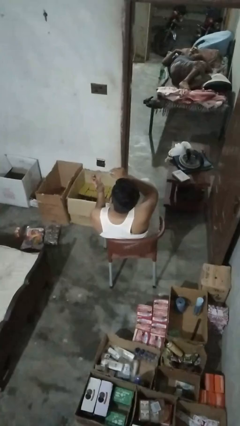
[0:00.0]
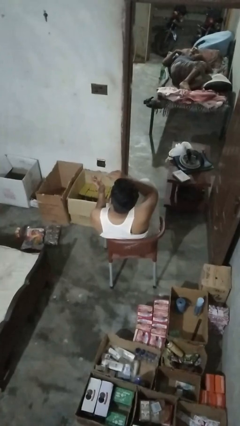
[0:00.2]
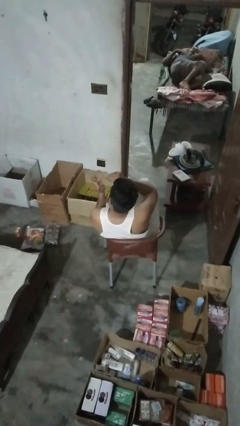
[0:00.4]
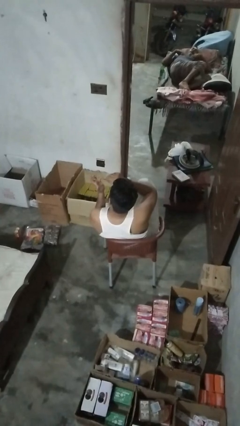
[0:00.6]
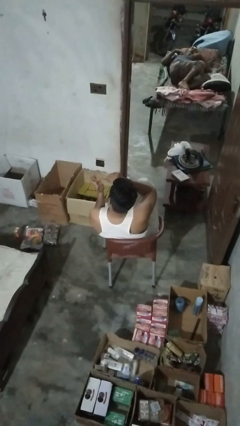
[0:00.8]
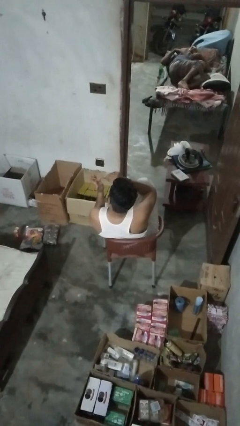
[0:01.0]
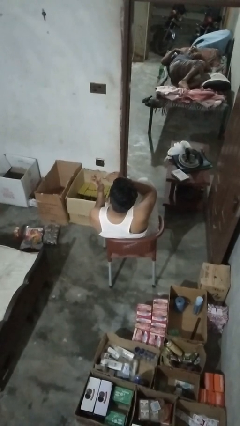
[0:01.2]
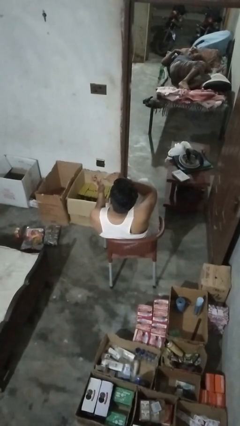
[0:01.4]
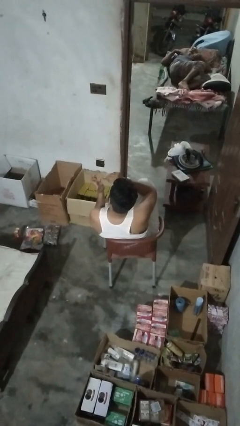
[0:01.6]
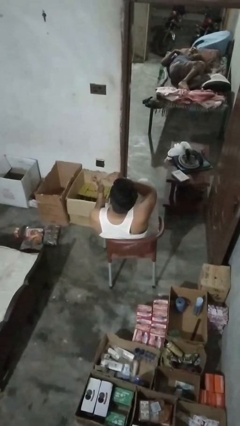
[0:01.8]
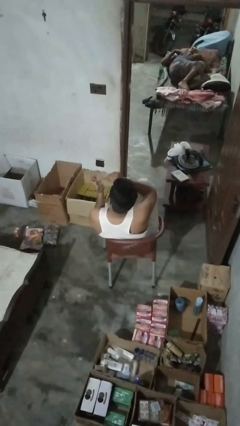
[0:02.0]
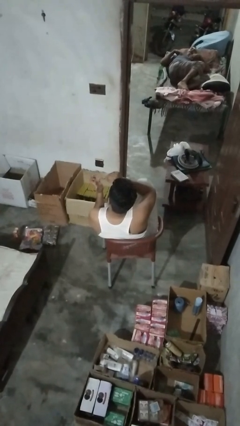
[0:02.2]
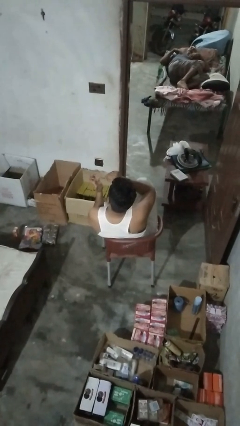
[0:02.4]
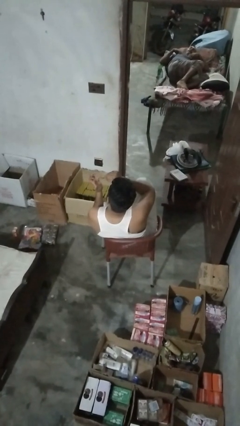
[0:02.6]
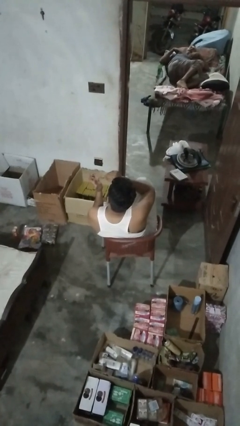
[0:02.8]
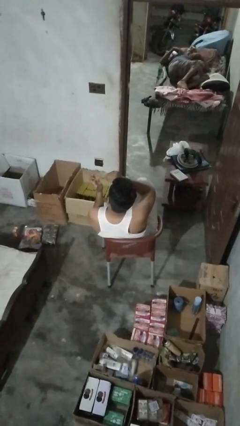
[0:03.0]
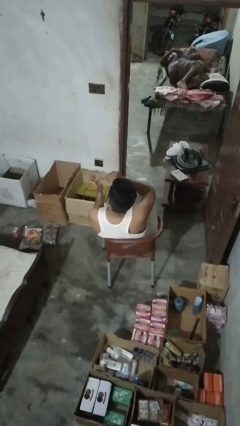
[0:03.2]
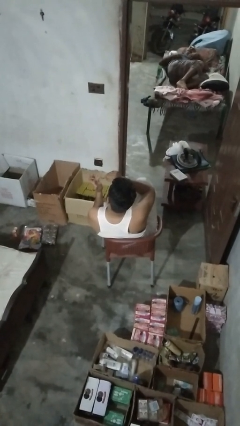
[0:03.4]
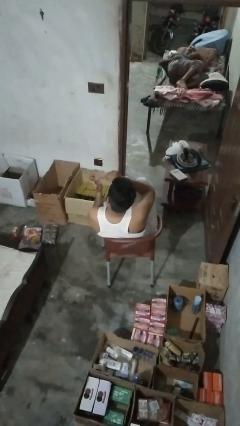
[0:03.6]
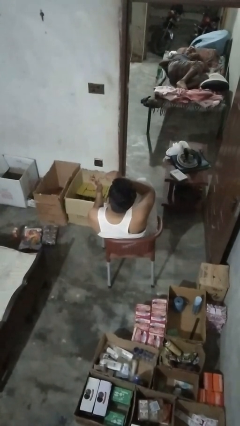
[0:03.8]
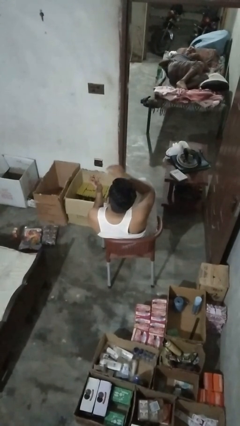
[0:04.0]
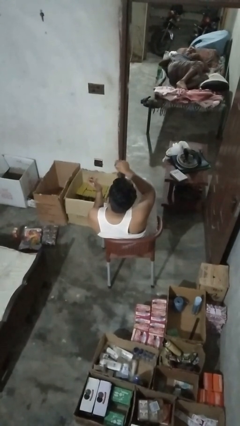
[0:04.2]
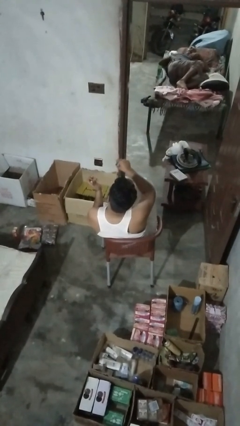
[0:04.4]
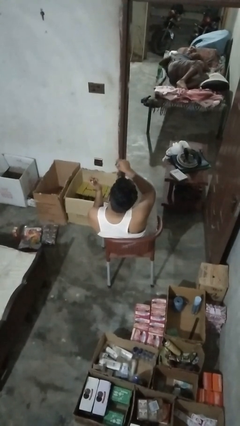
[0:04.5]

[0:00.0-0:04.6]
person clips fingernails

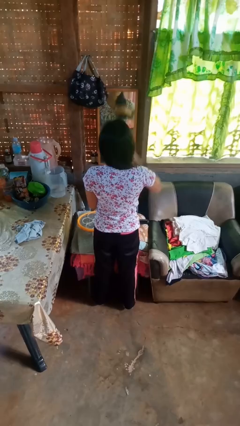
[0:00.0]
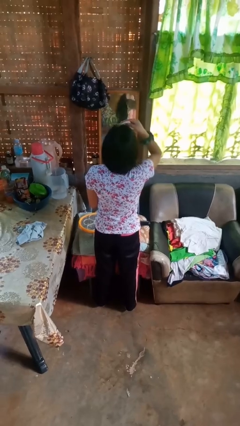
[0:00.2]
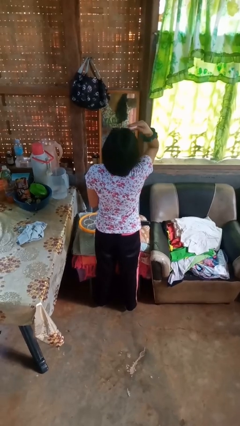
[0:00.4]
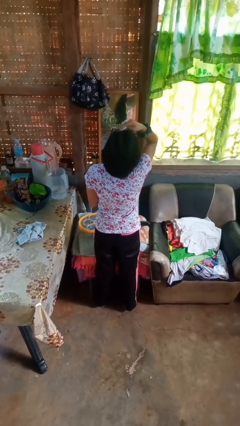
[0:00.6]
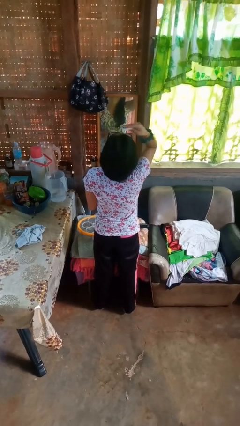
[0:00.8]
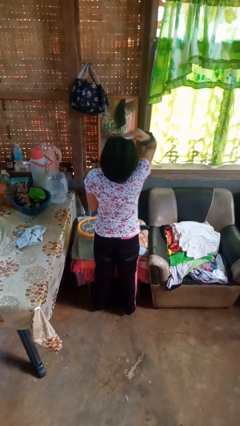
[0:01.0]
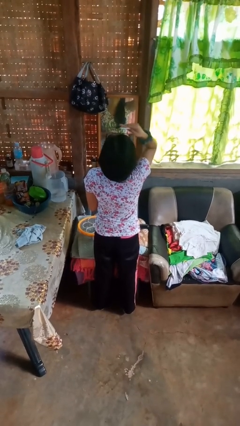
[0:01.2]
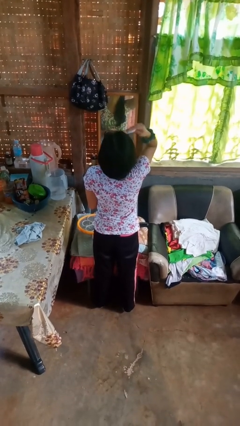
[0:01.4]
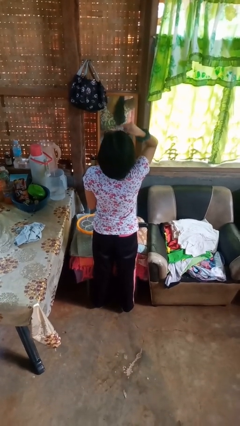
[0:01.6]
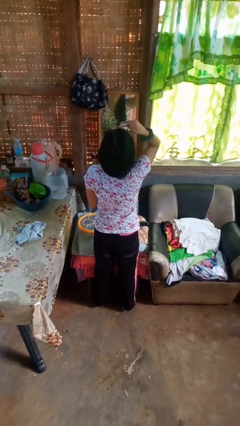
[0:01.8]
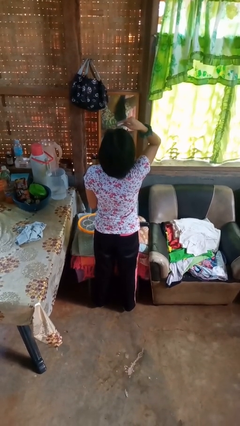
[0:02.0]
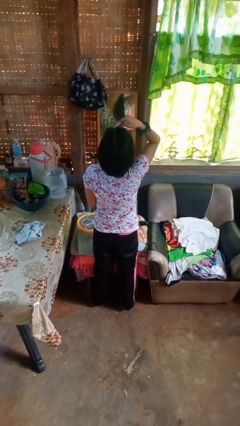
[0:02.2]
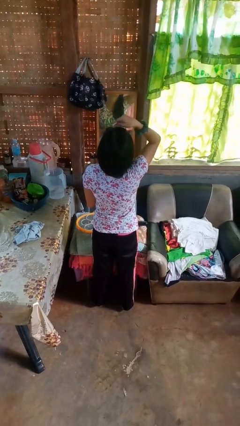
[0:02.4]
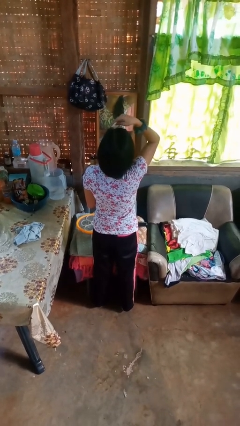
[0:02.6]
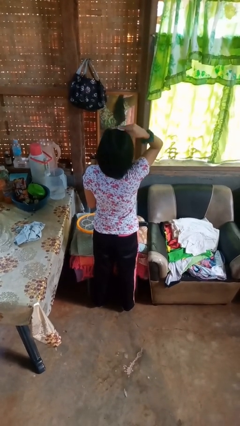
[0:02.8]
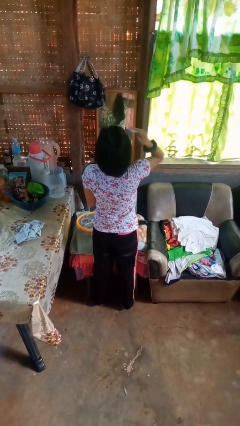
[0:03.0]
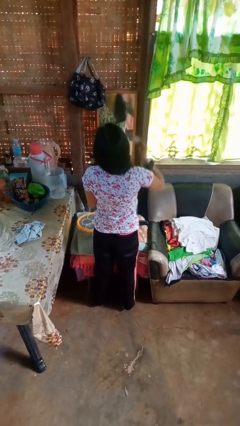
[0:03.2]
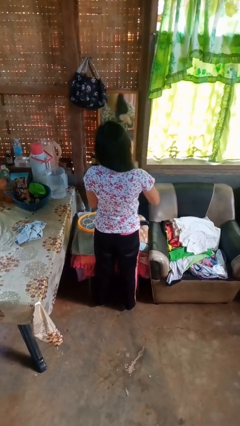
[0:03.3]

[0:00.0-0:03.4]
person applies foundation makeup

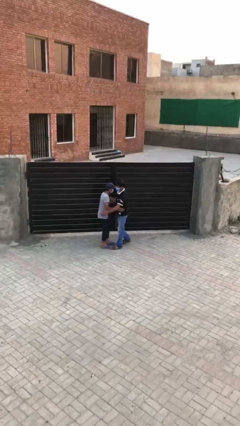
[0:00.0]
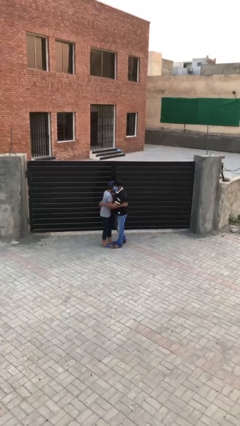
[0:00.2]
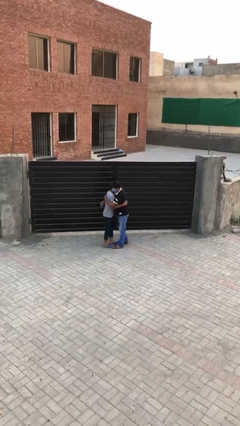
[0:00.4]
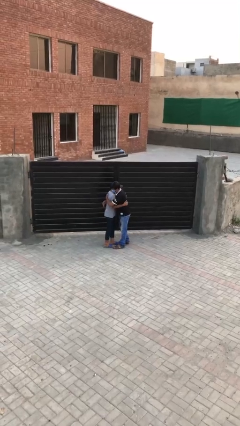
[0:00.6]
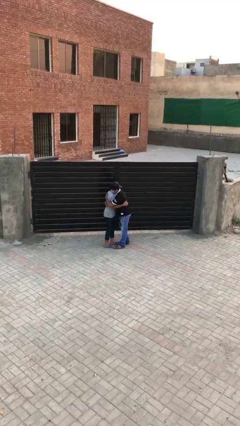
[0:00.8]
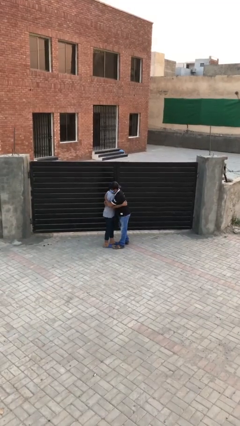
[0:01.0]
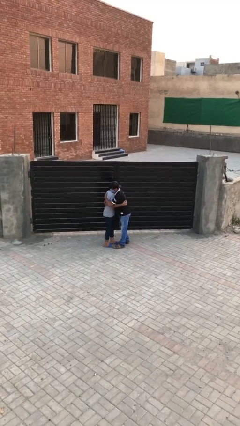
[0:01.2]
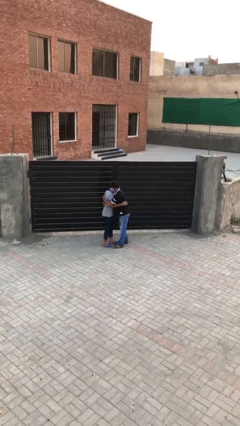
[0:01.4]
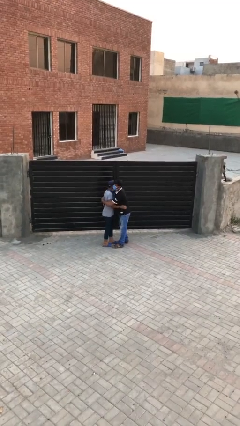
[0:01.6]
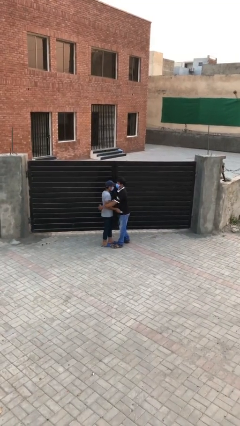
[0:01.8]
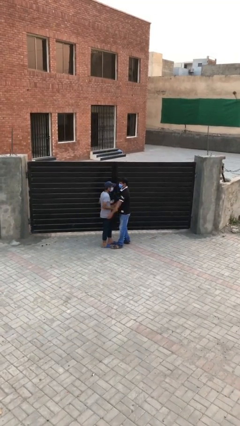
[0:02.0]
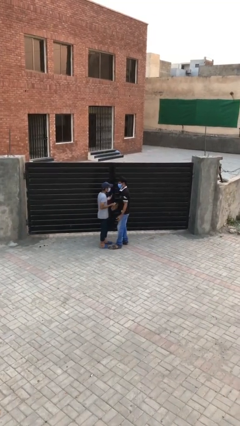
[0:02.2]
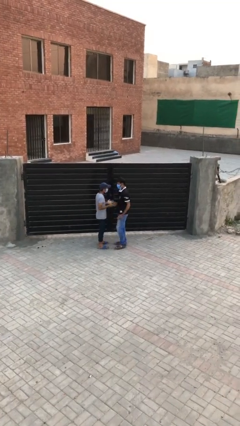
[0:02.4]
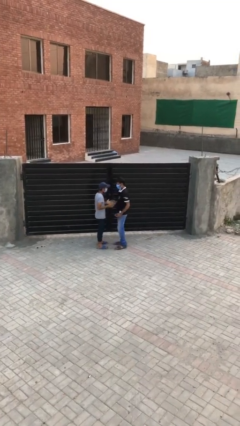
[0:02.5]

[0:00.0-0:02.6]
person embraces person

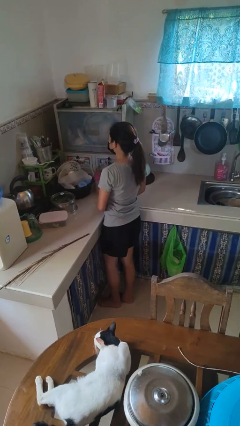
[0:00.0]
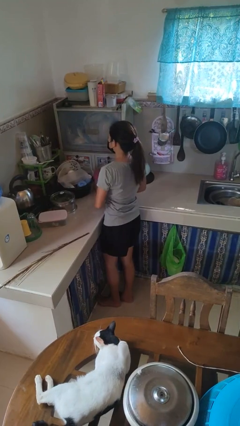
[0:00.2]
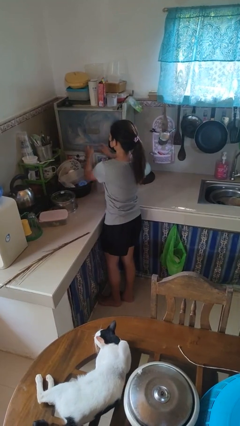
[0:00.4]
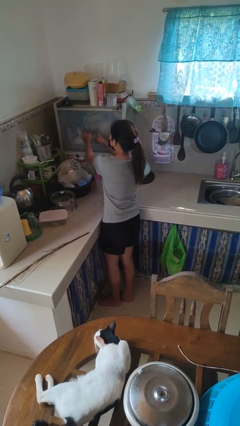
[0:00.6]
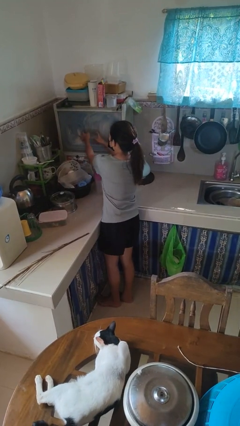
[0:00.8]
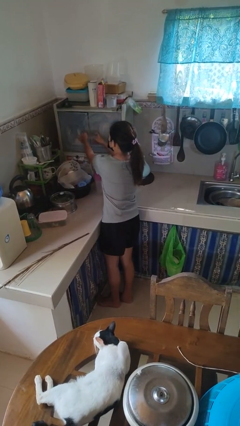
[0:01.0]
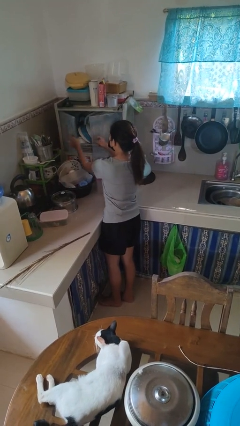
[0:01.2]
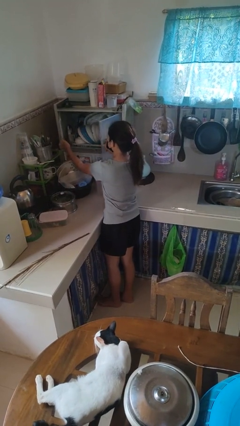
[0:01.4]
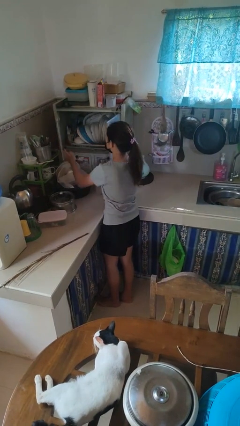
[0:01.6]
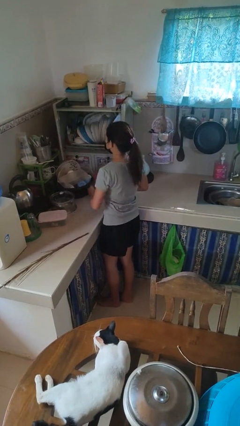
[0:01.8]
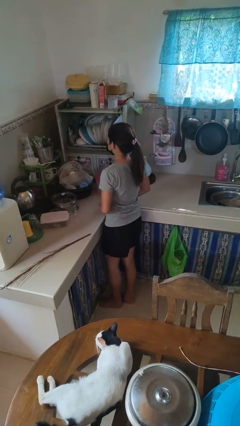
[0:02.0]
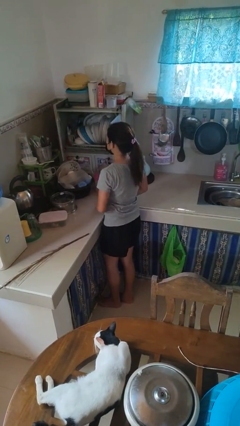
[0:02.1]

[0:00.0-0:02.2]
person opens kitchen drawer

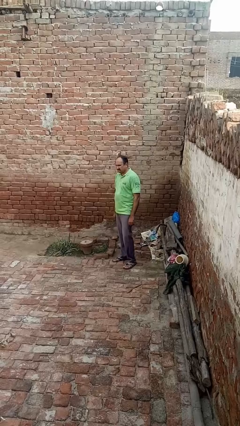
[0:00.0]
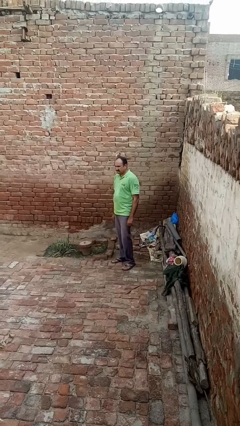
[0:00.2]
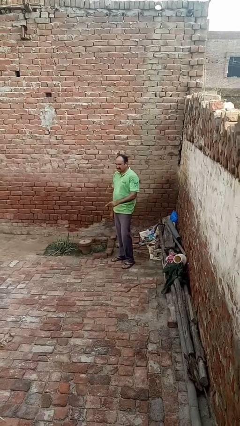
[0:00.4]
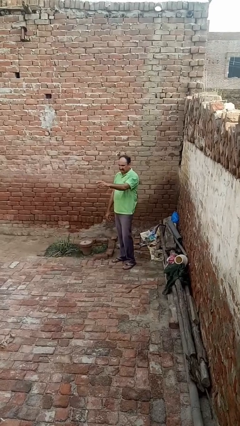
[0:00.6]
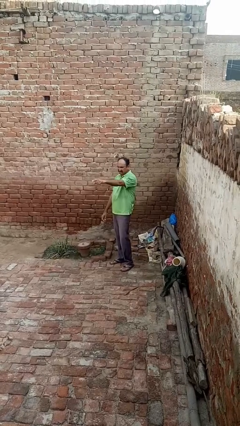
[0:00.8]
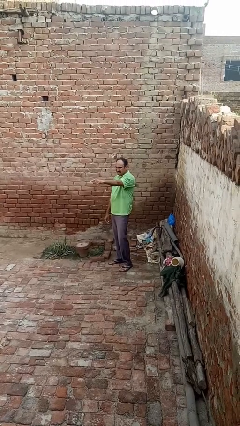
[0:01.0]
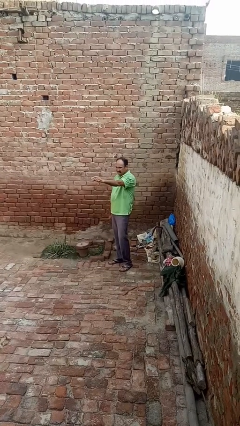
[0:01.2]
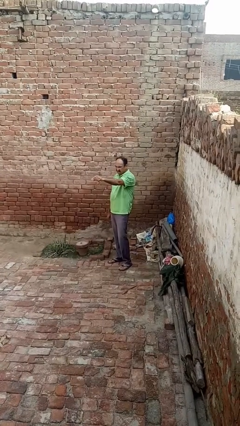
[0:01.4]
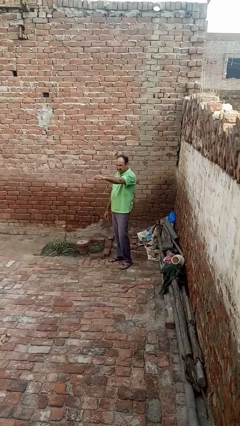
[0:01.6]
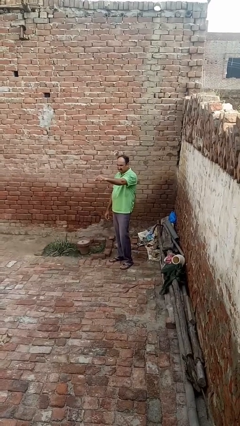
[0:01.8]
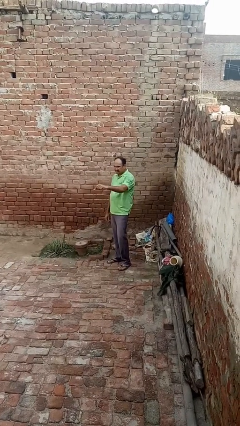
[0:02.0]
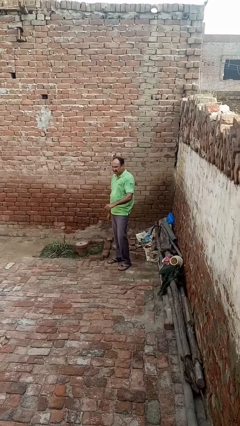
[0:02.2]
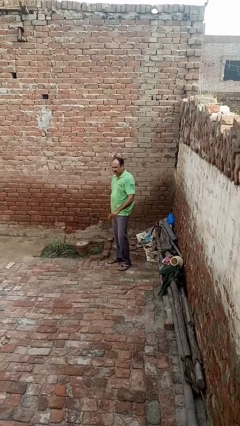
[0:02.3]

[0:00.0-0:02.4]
person points at person

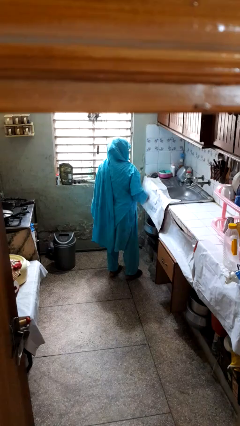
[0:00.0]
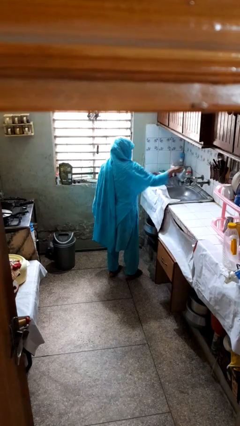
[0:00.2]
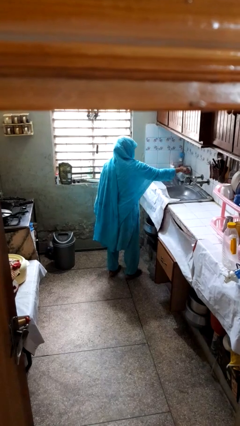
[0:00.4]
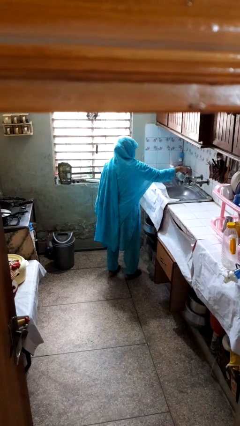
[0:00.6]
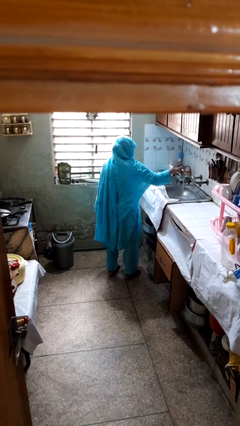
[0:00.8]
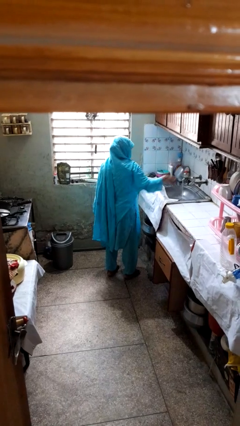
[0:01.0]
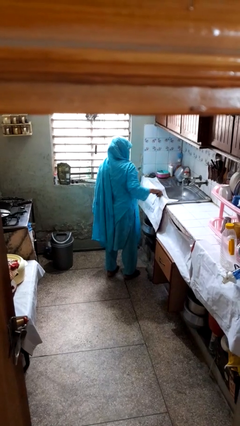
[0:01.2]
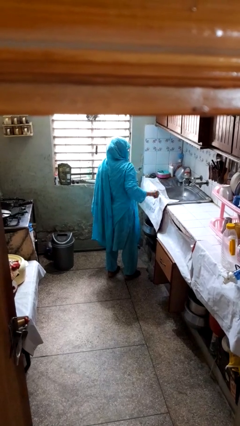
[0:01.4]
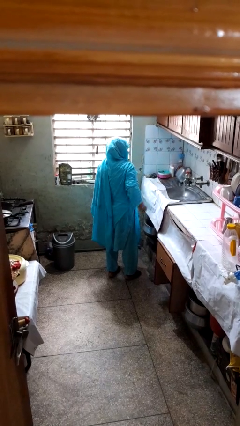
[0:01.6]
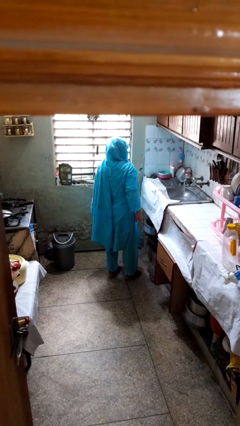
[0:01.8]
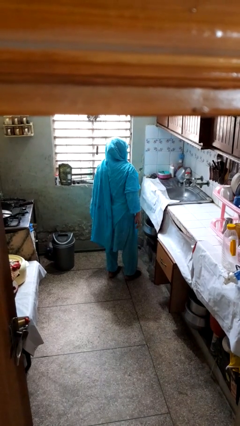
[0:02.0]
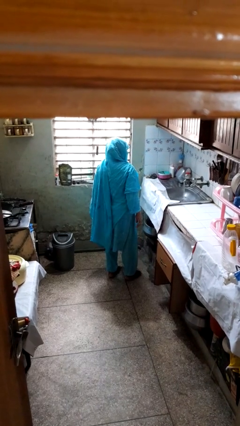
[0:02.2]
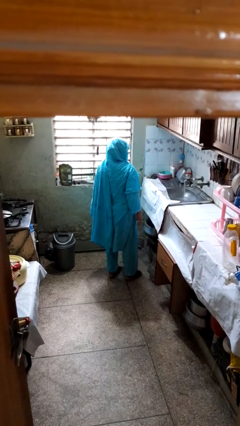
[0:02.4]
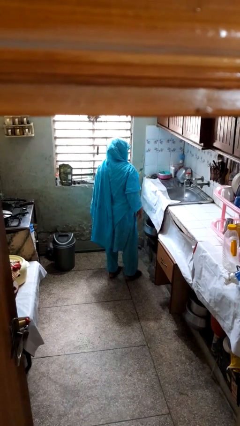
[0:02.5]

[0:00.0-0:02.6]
person turns on faucet

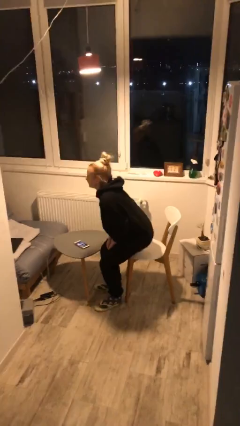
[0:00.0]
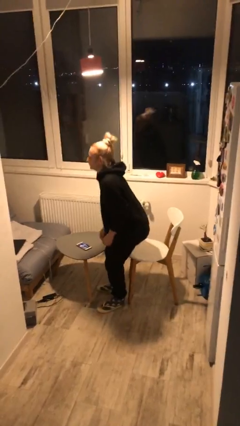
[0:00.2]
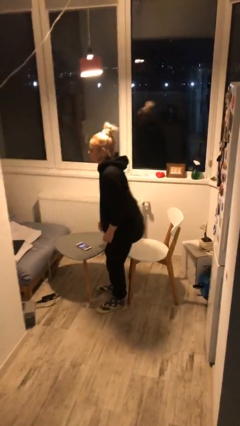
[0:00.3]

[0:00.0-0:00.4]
person stands up
